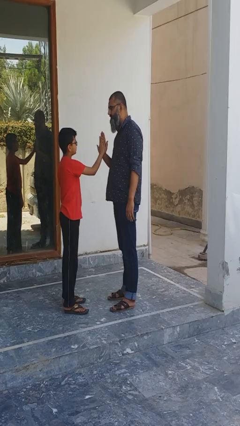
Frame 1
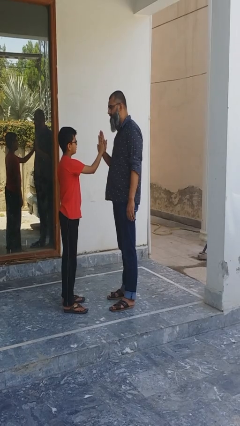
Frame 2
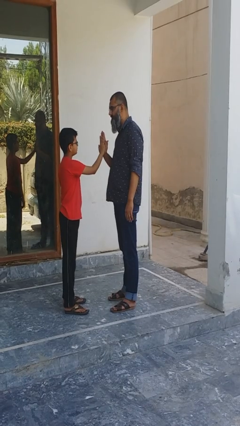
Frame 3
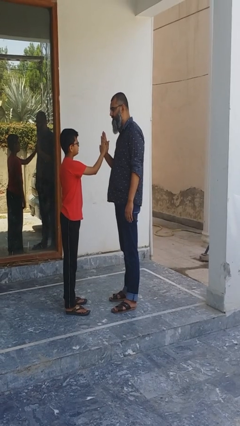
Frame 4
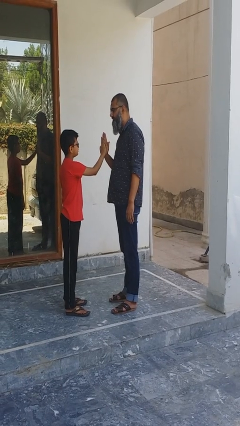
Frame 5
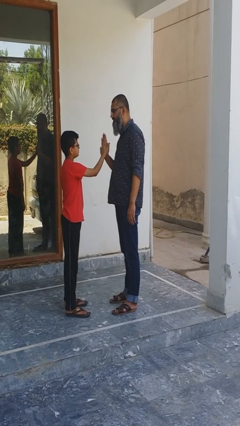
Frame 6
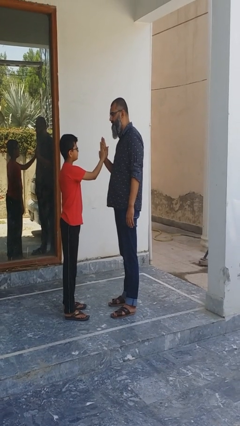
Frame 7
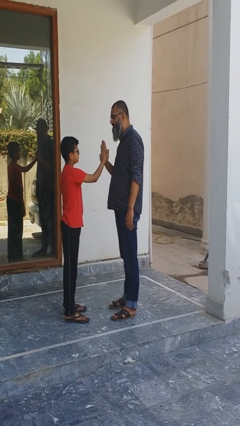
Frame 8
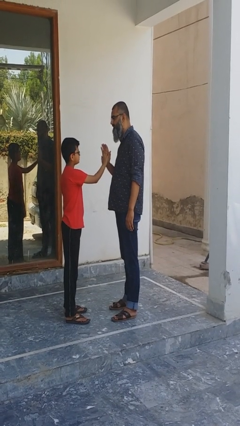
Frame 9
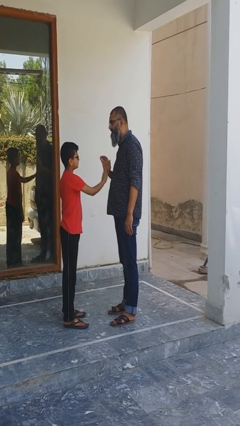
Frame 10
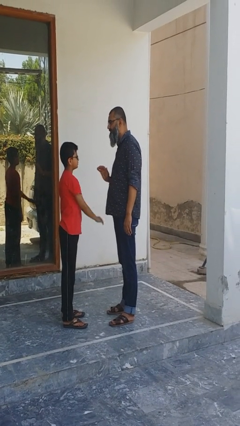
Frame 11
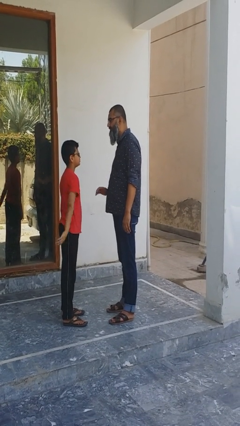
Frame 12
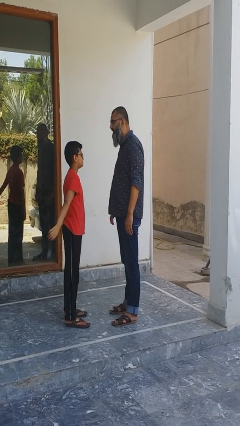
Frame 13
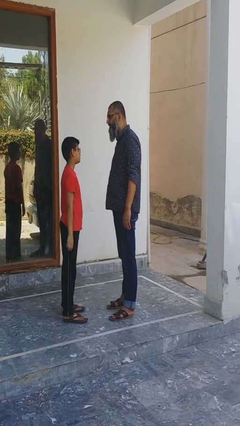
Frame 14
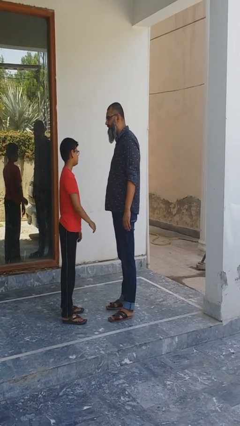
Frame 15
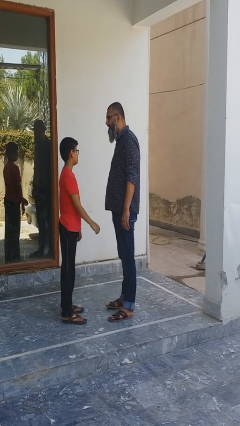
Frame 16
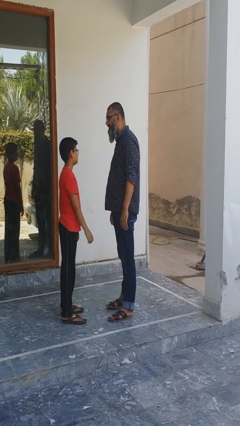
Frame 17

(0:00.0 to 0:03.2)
person highfives hand

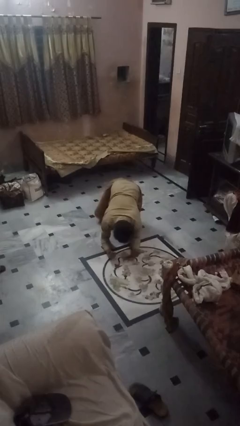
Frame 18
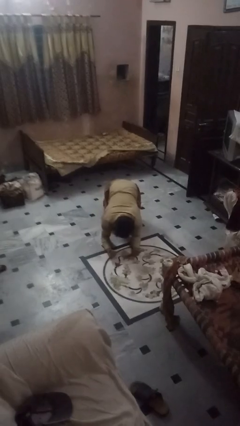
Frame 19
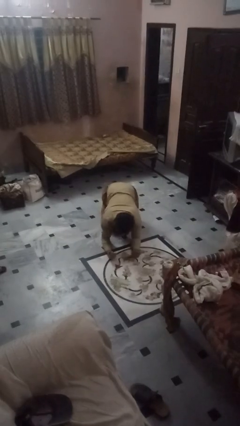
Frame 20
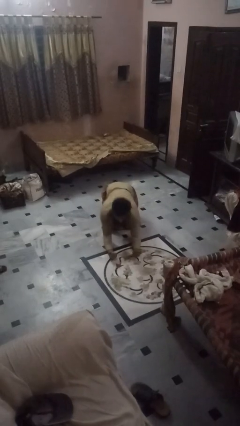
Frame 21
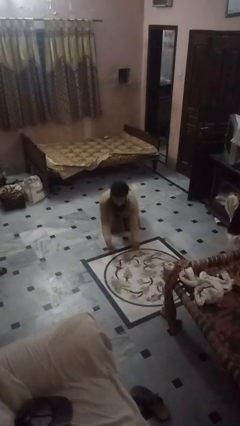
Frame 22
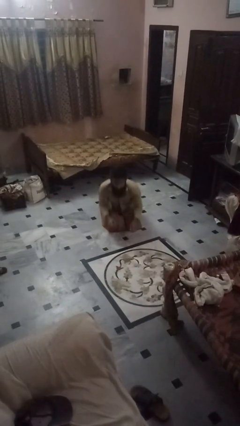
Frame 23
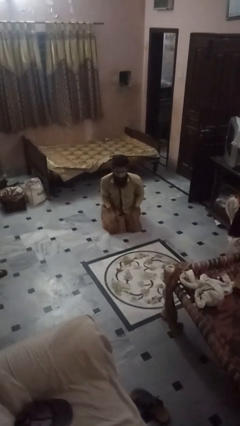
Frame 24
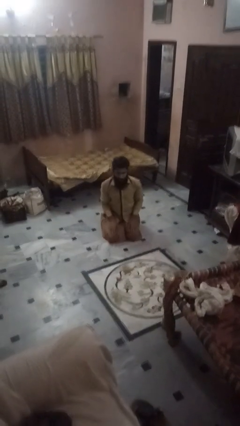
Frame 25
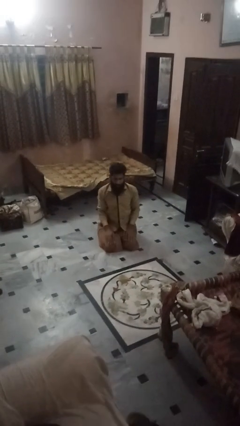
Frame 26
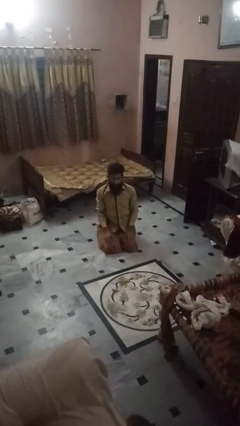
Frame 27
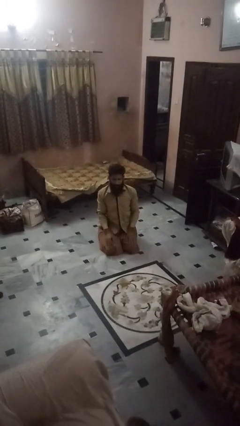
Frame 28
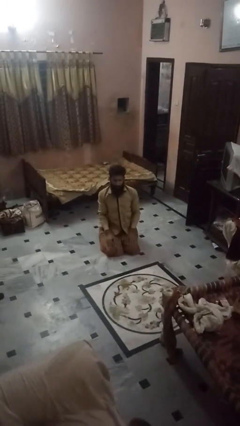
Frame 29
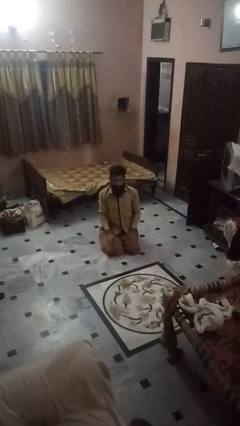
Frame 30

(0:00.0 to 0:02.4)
person stands up from floor

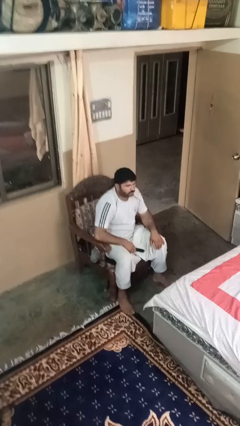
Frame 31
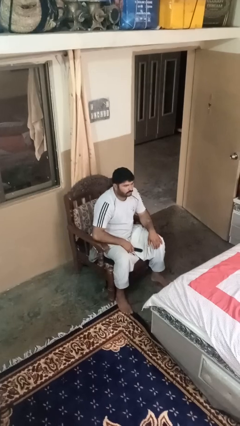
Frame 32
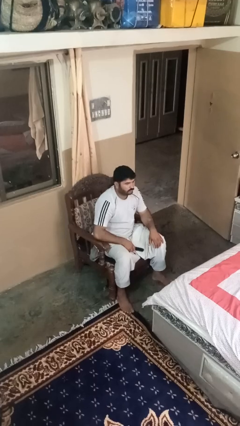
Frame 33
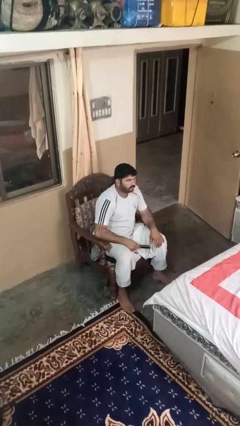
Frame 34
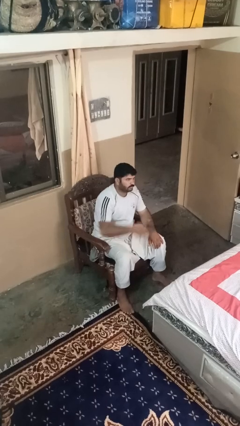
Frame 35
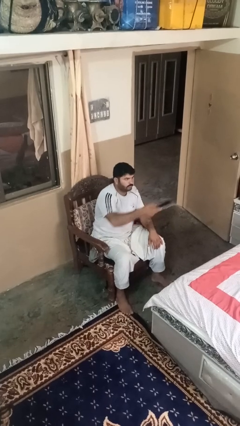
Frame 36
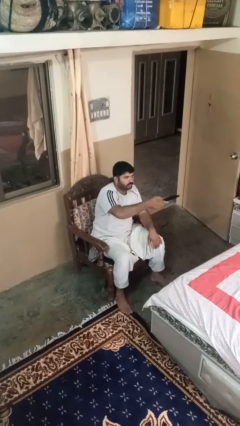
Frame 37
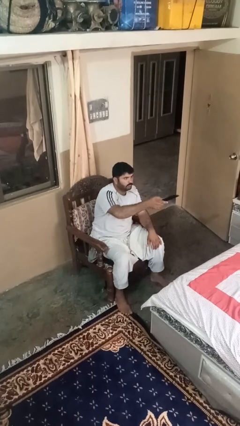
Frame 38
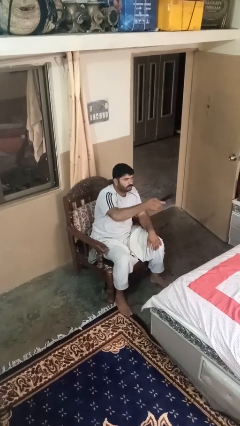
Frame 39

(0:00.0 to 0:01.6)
person uses television remote

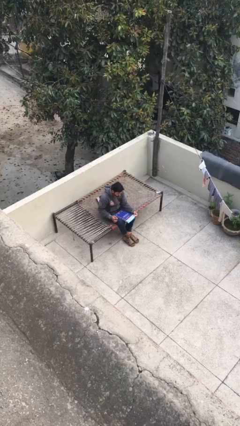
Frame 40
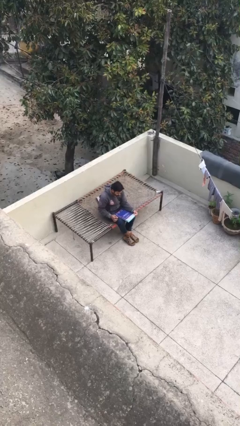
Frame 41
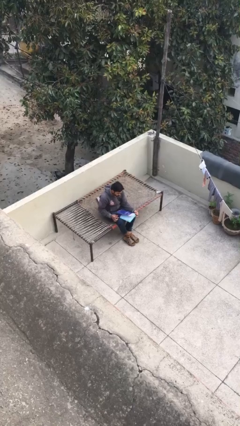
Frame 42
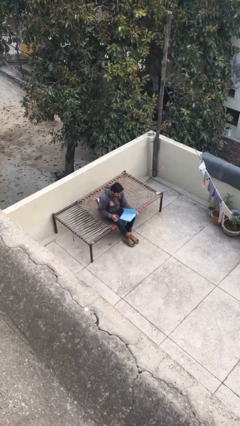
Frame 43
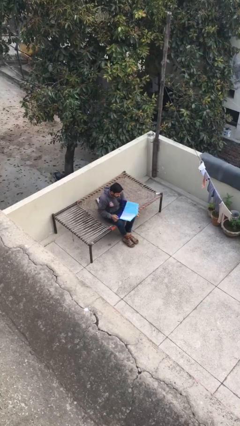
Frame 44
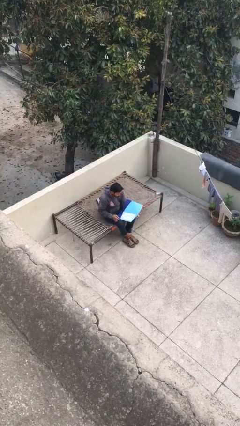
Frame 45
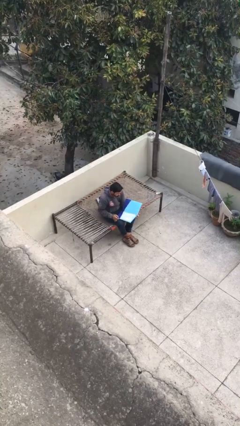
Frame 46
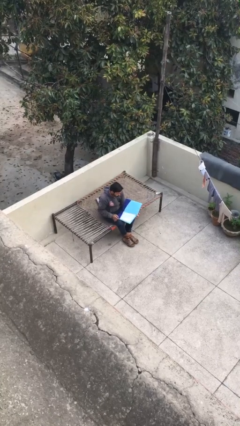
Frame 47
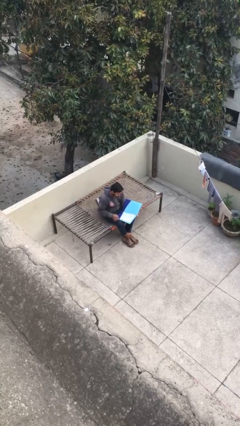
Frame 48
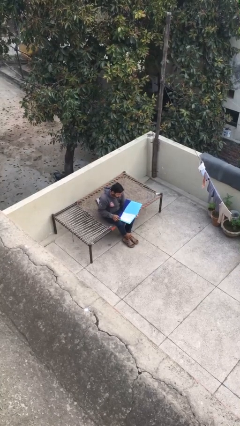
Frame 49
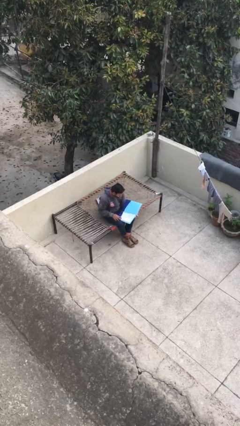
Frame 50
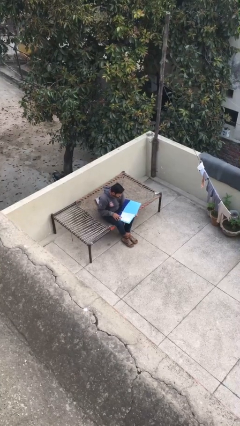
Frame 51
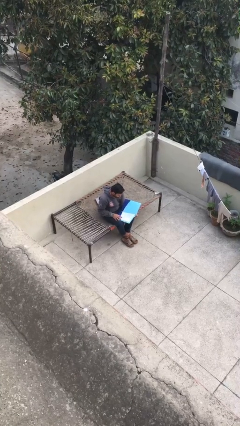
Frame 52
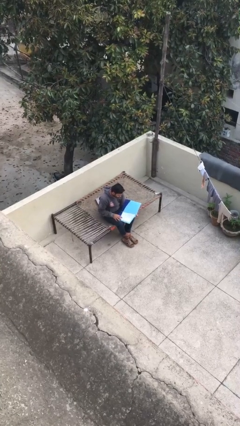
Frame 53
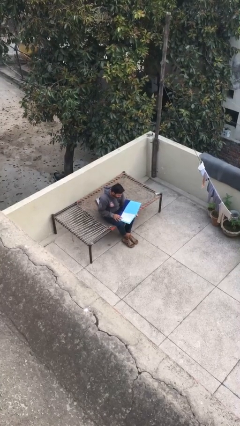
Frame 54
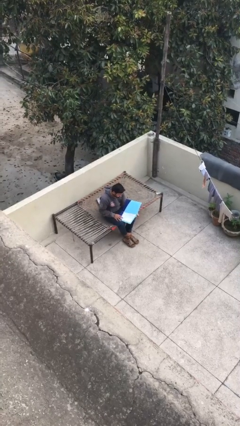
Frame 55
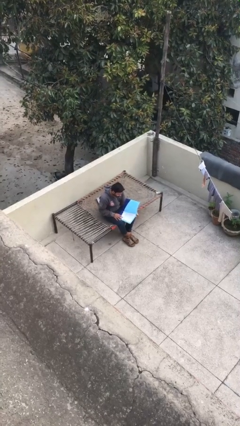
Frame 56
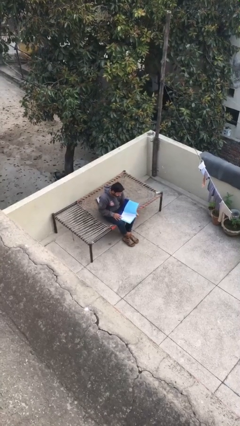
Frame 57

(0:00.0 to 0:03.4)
person reads document

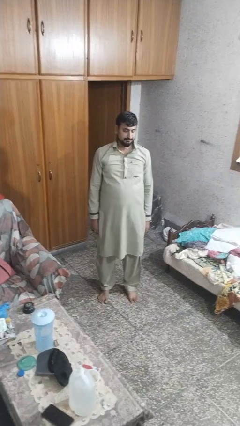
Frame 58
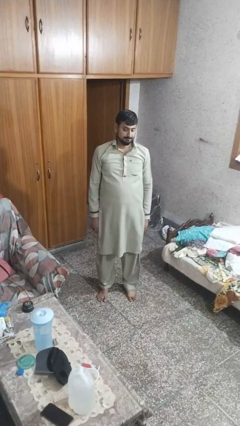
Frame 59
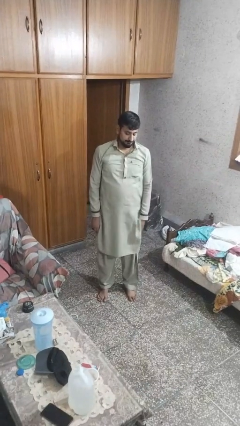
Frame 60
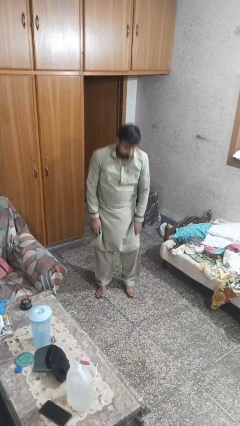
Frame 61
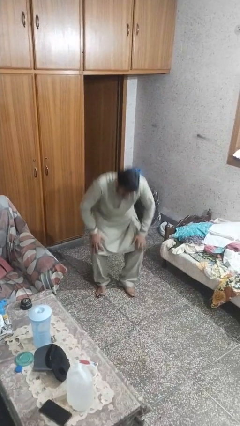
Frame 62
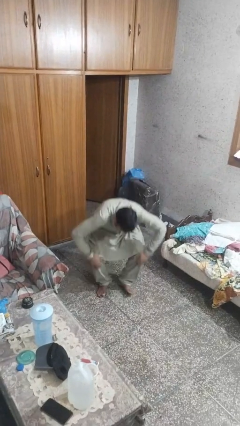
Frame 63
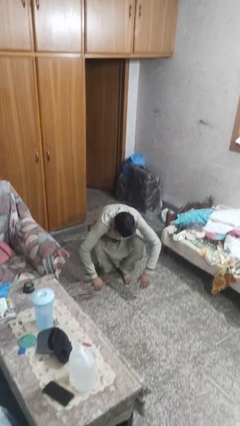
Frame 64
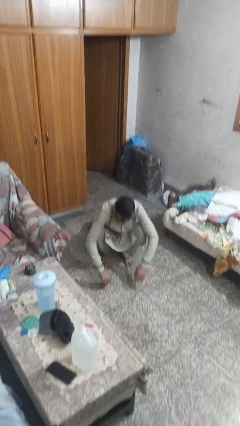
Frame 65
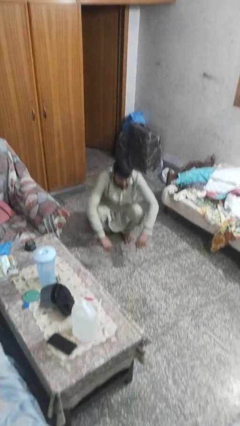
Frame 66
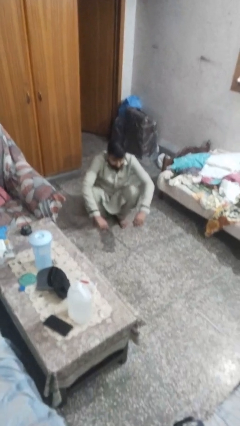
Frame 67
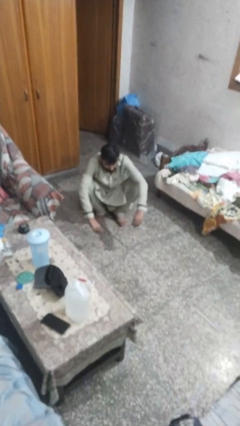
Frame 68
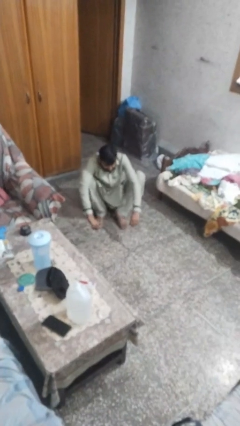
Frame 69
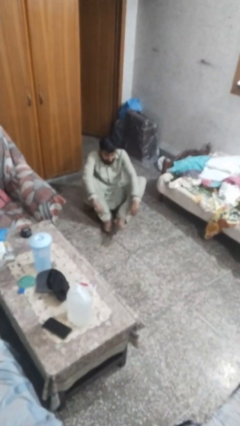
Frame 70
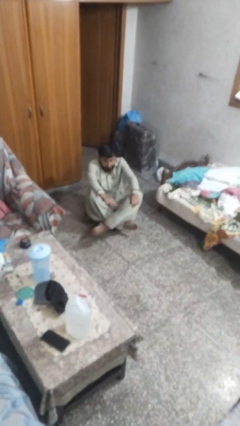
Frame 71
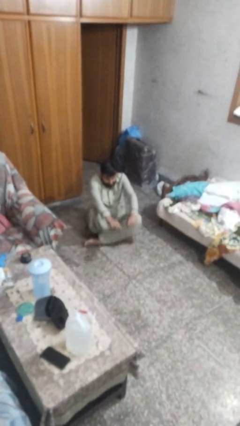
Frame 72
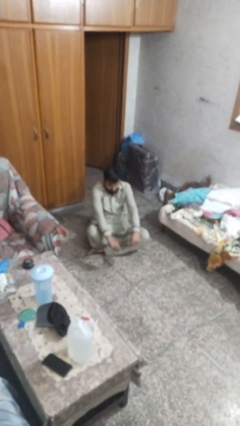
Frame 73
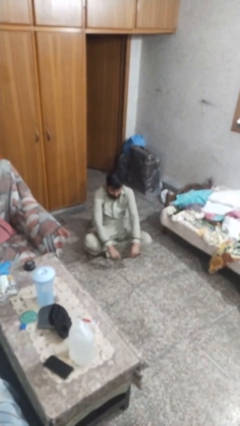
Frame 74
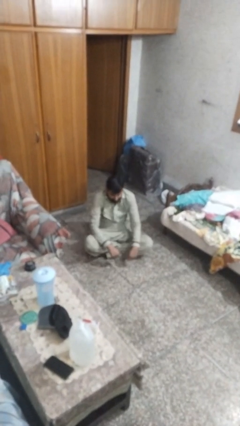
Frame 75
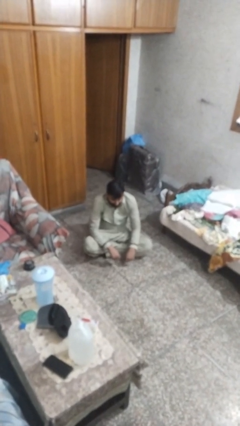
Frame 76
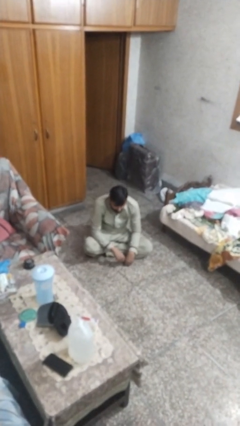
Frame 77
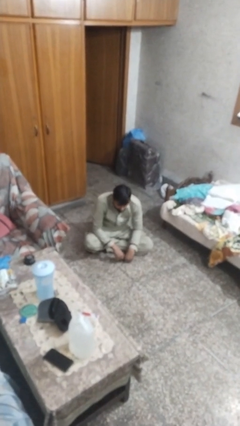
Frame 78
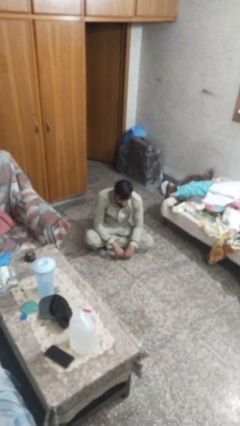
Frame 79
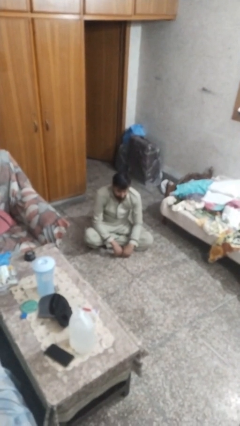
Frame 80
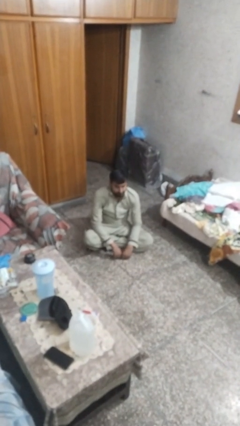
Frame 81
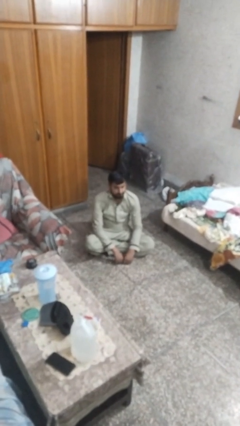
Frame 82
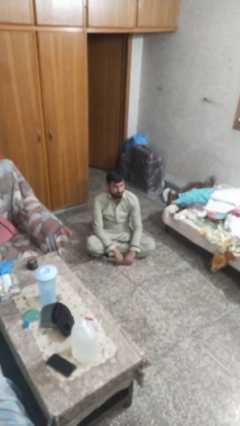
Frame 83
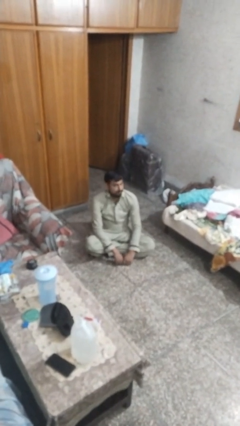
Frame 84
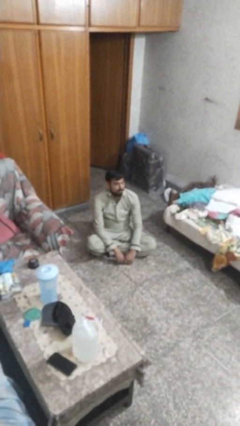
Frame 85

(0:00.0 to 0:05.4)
person sits crisscross

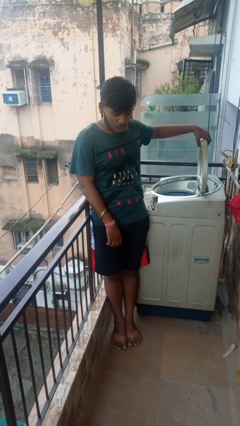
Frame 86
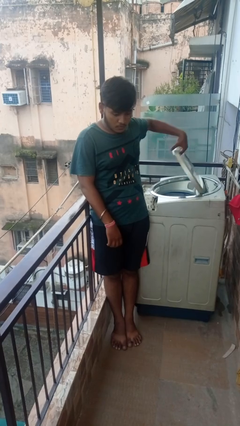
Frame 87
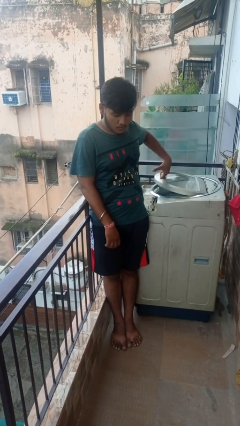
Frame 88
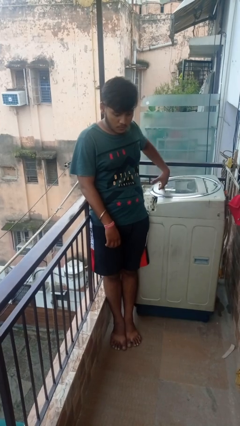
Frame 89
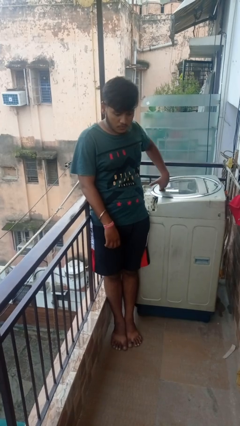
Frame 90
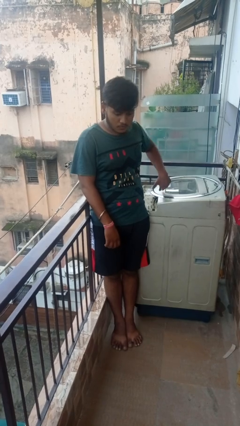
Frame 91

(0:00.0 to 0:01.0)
person closes clothes washer

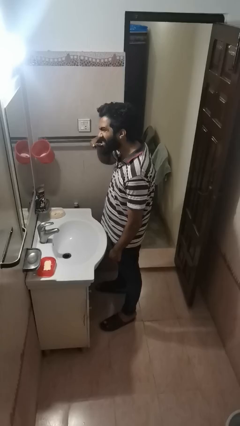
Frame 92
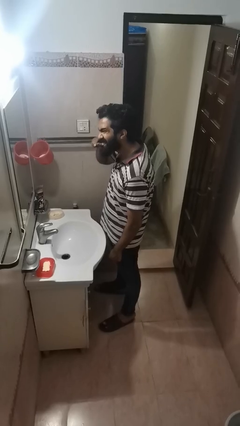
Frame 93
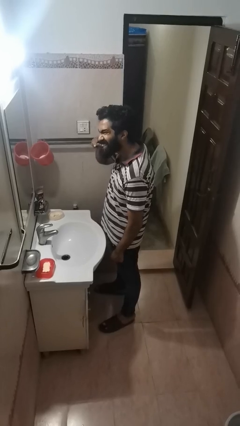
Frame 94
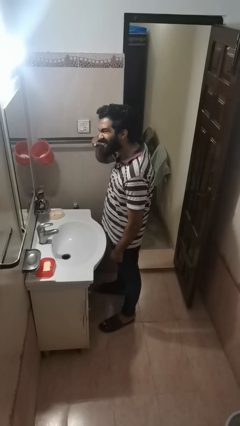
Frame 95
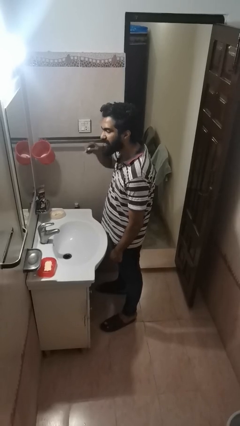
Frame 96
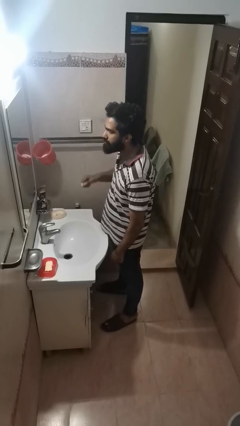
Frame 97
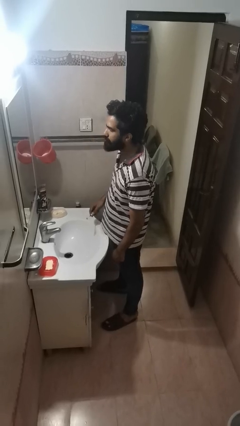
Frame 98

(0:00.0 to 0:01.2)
person brushes teeth
